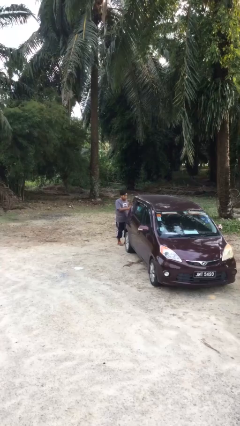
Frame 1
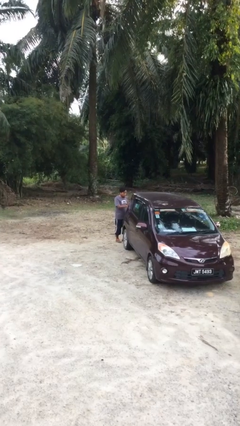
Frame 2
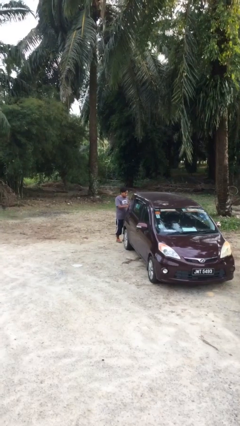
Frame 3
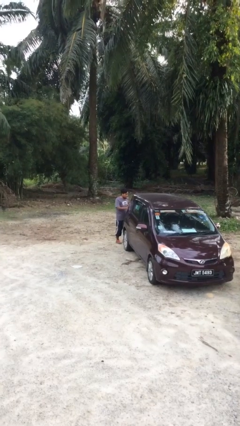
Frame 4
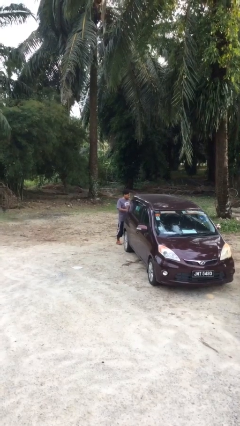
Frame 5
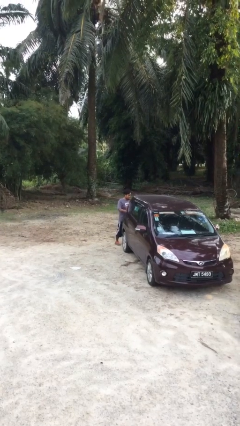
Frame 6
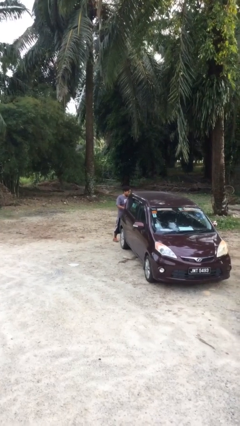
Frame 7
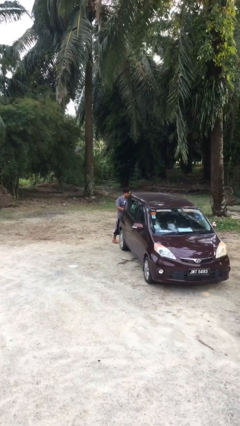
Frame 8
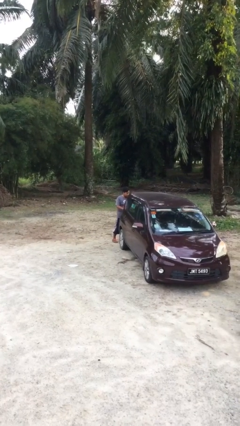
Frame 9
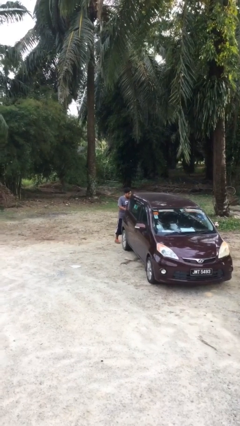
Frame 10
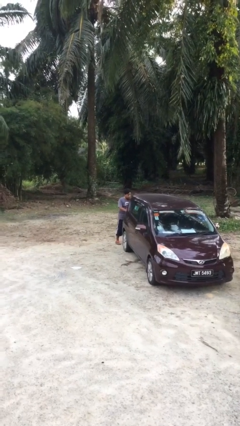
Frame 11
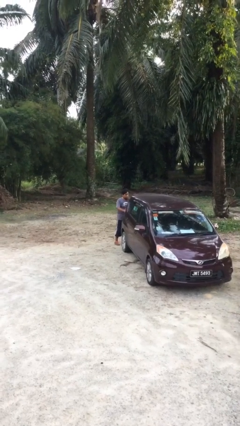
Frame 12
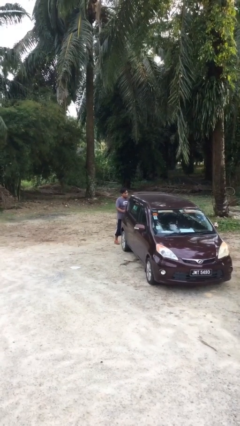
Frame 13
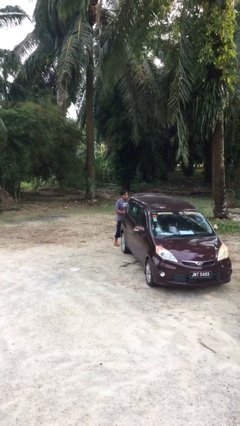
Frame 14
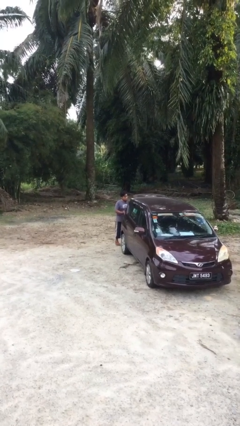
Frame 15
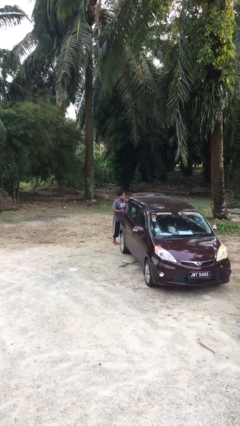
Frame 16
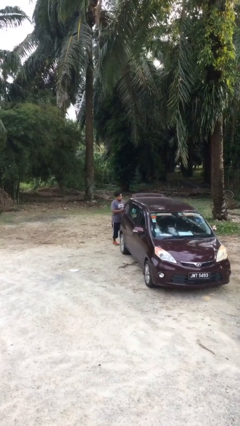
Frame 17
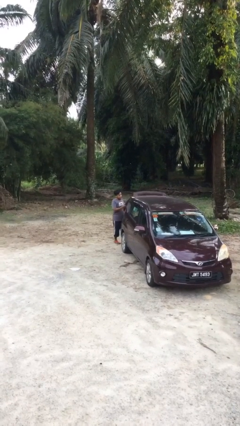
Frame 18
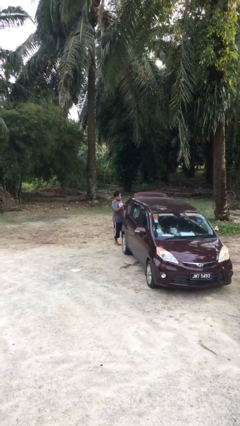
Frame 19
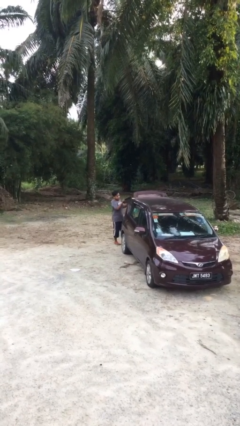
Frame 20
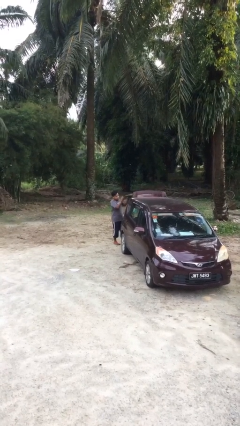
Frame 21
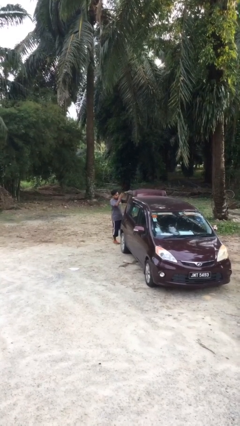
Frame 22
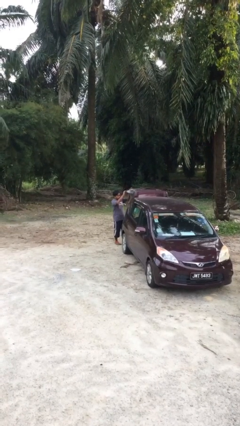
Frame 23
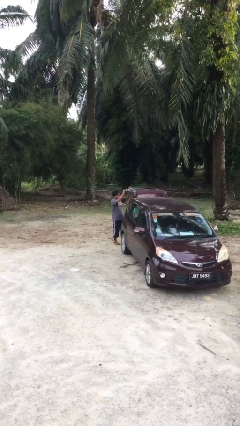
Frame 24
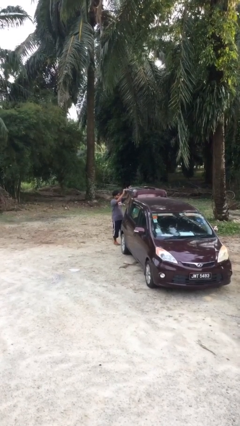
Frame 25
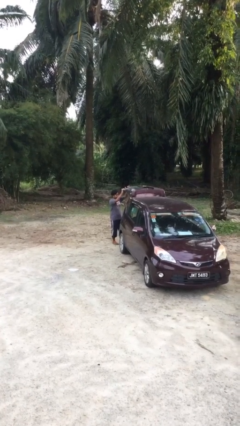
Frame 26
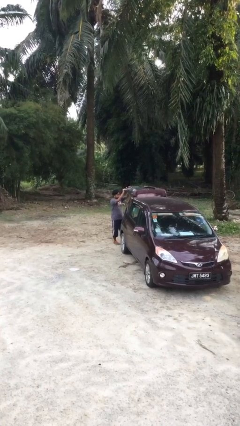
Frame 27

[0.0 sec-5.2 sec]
person opens car trunk

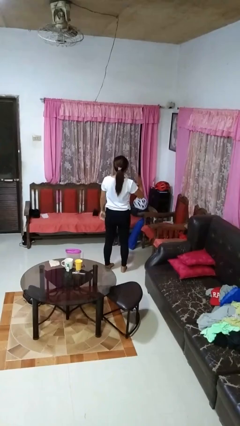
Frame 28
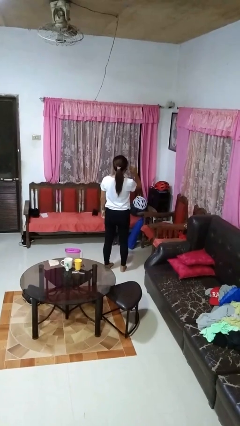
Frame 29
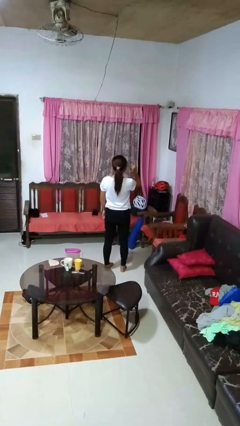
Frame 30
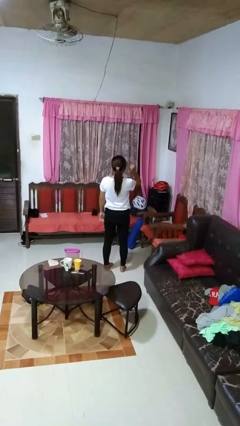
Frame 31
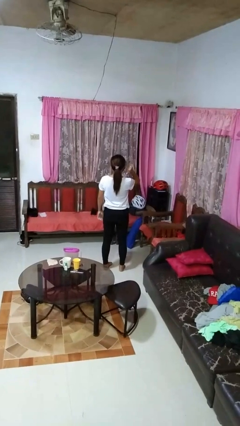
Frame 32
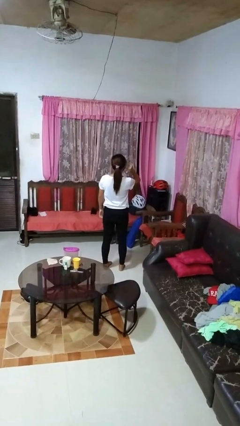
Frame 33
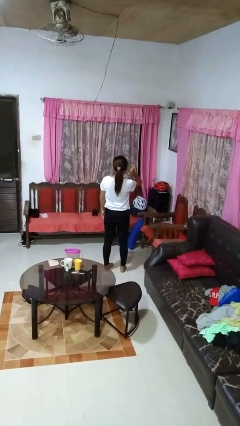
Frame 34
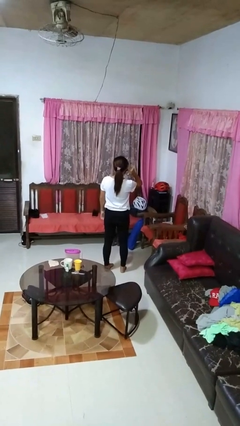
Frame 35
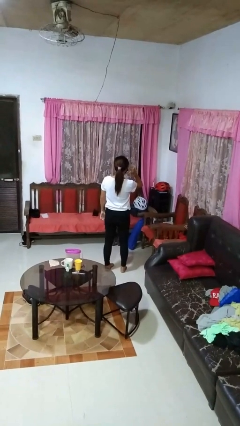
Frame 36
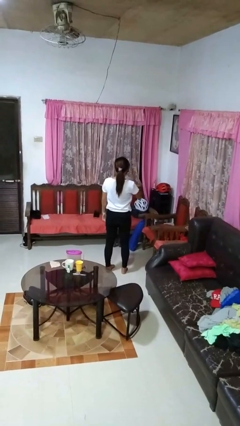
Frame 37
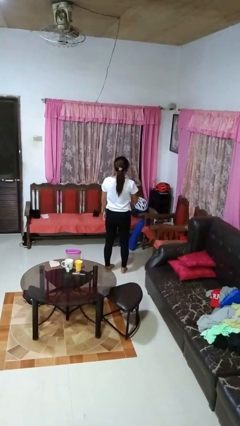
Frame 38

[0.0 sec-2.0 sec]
person gestures behind me

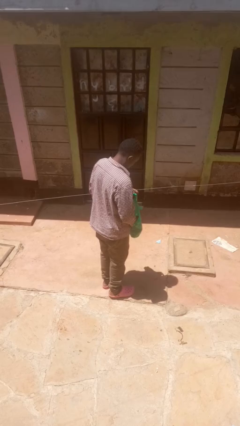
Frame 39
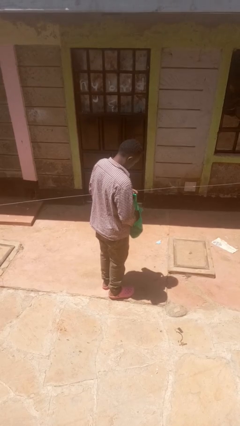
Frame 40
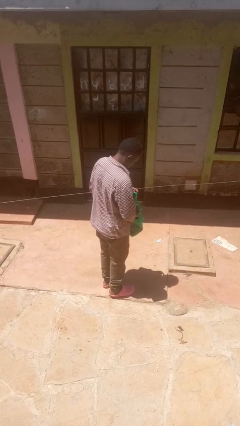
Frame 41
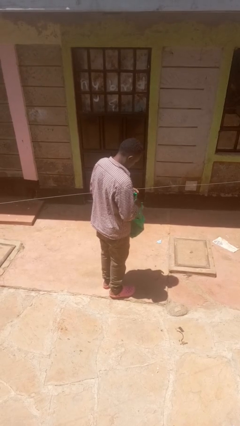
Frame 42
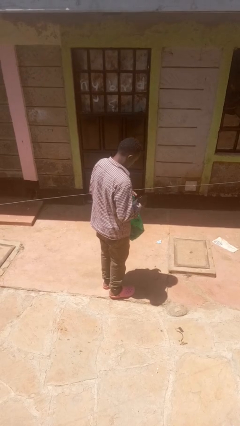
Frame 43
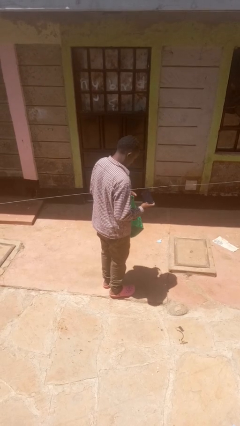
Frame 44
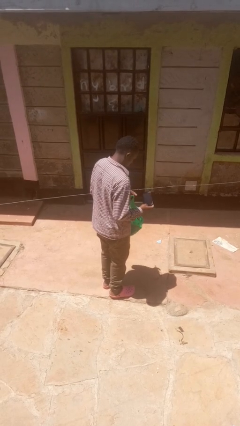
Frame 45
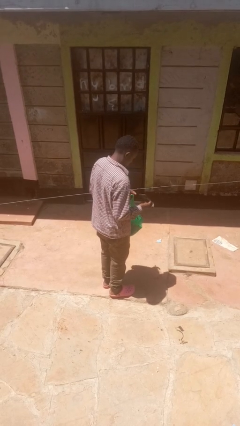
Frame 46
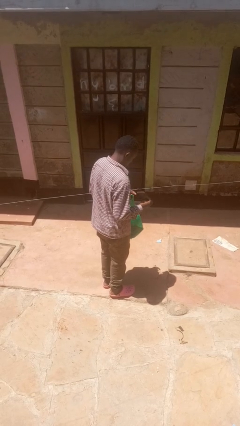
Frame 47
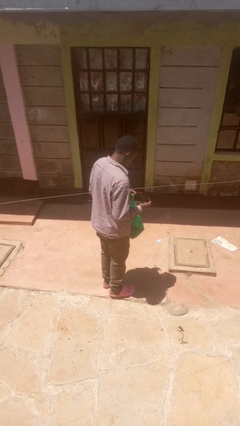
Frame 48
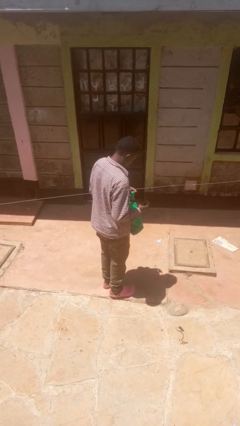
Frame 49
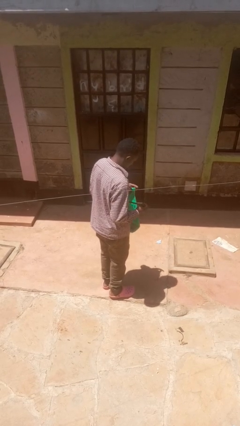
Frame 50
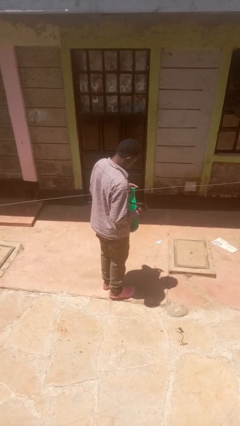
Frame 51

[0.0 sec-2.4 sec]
person takes object from bag

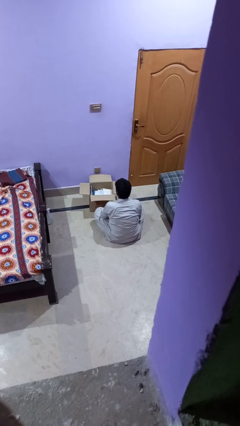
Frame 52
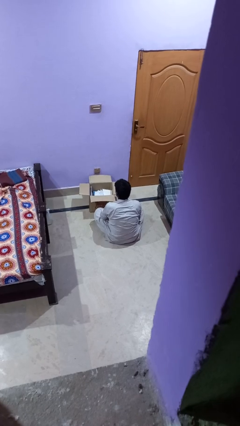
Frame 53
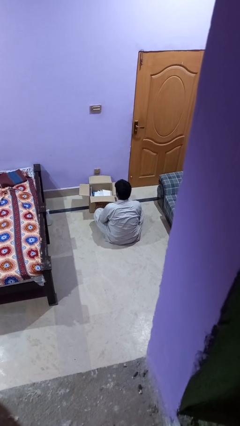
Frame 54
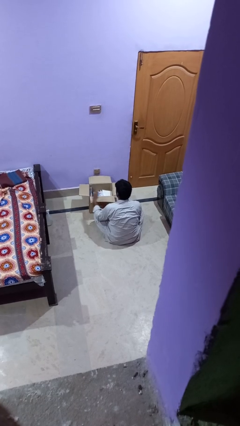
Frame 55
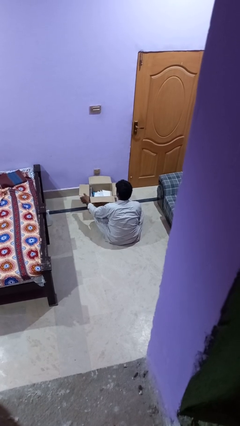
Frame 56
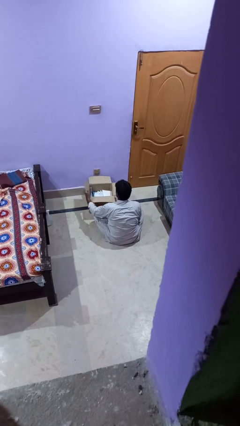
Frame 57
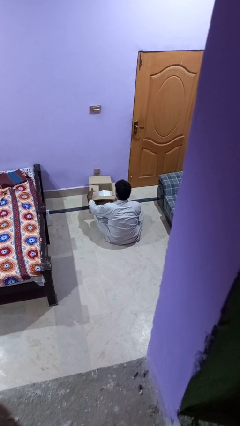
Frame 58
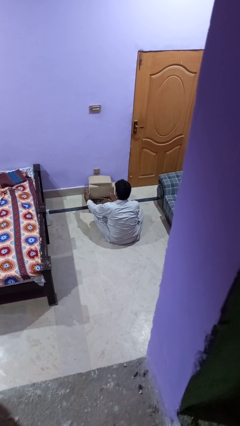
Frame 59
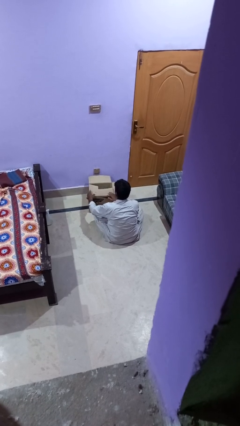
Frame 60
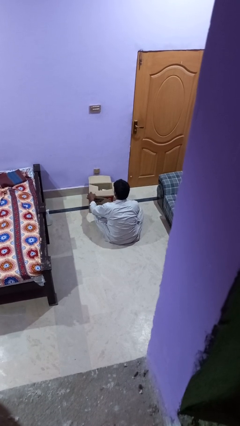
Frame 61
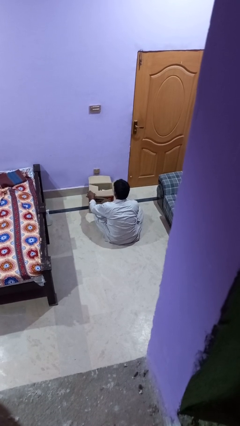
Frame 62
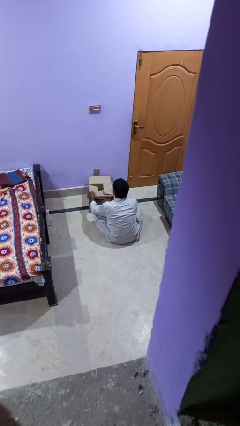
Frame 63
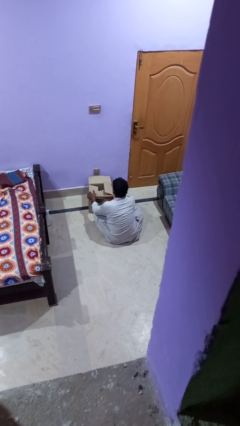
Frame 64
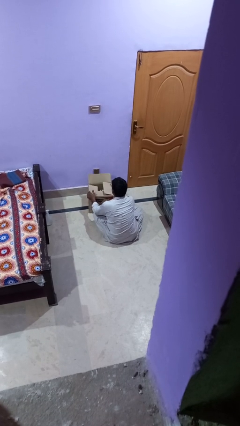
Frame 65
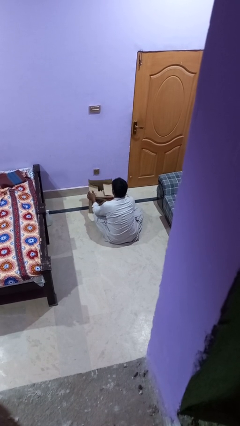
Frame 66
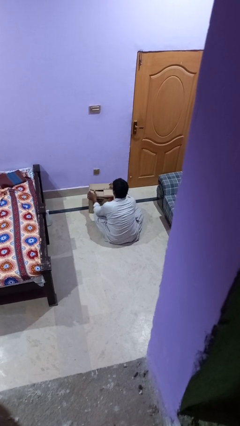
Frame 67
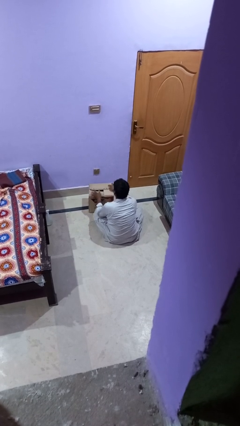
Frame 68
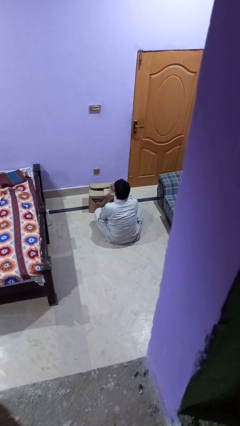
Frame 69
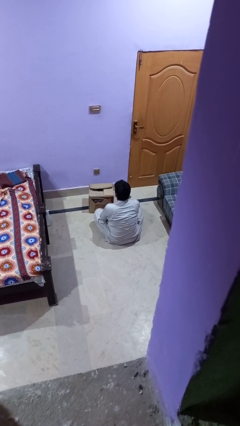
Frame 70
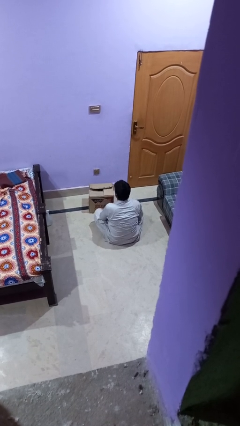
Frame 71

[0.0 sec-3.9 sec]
person closes box

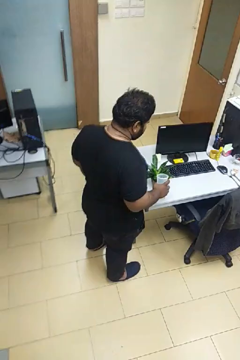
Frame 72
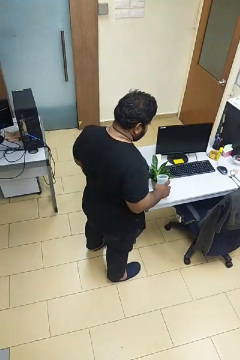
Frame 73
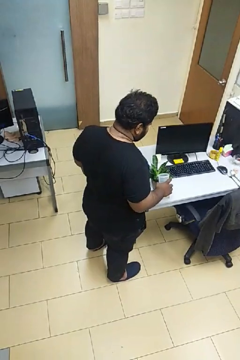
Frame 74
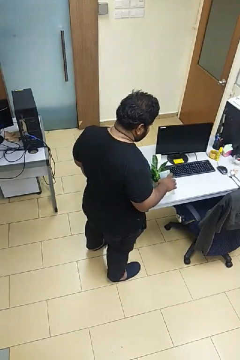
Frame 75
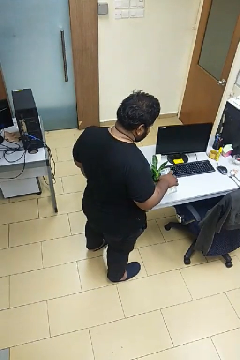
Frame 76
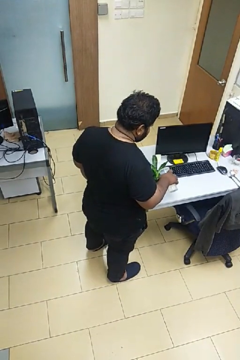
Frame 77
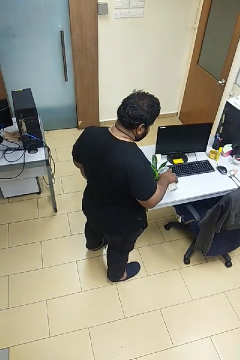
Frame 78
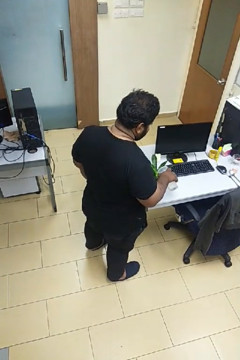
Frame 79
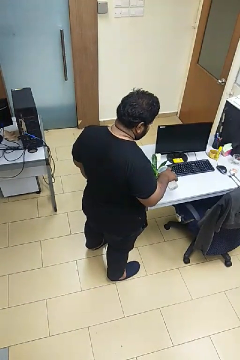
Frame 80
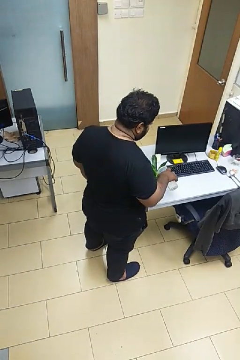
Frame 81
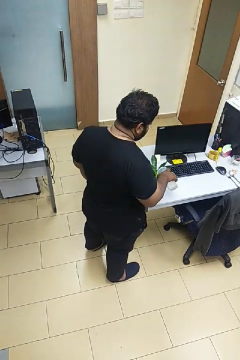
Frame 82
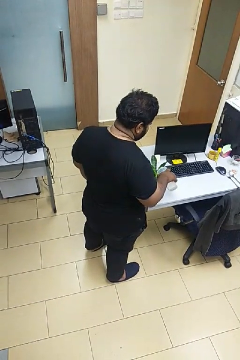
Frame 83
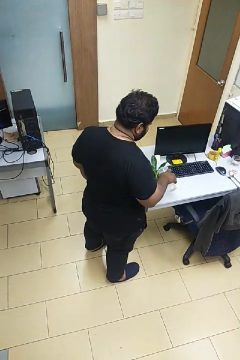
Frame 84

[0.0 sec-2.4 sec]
person waters houseplant

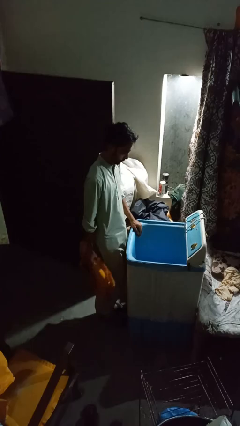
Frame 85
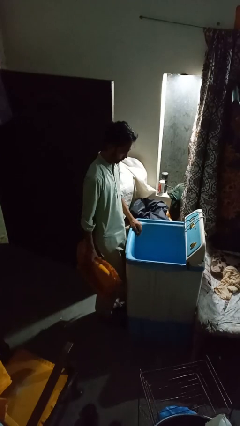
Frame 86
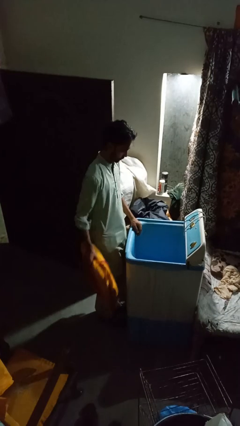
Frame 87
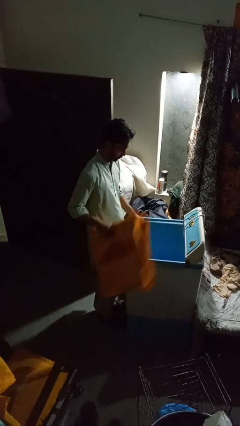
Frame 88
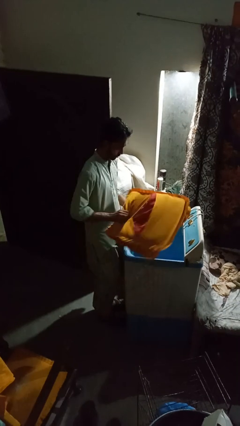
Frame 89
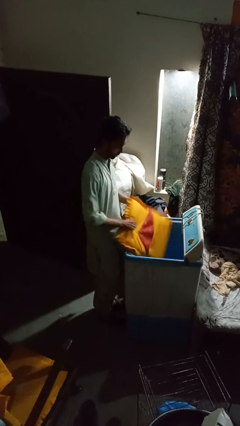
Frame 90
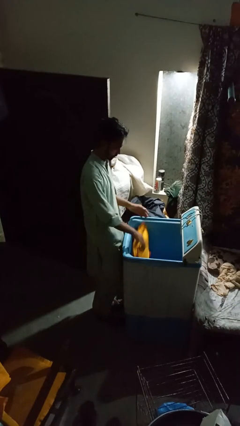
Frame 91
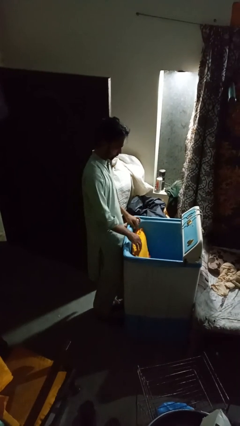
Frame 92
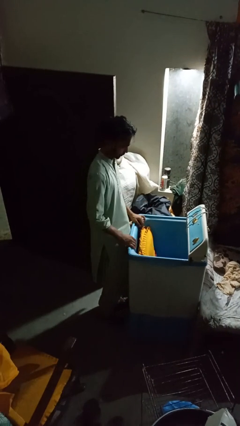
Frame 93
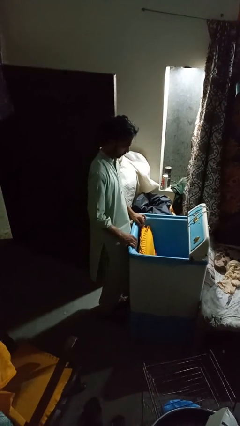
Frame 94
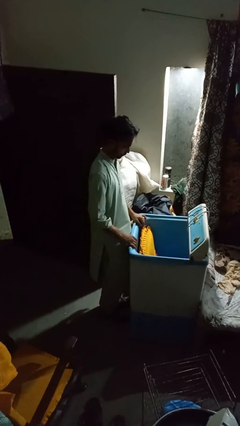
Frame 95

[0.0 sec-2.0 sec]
person loads clotheswasher
